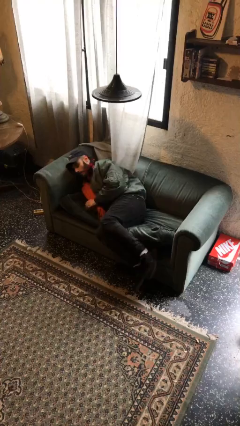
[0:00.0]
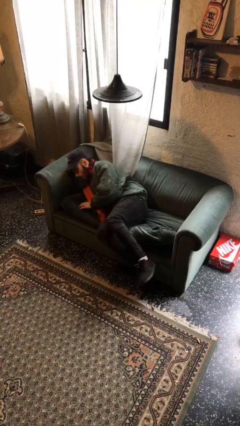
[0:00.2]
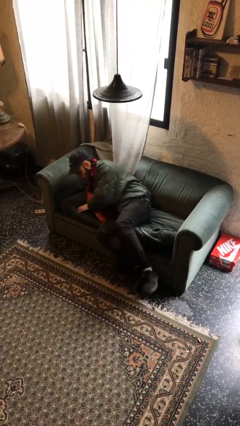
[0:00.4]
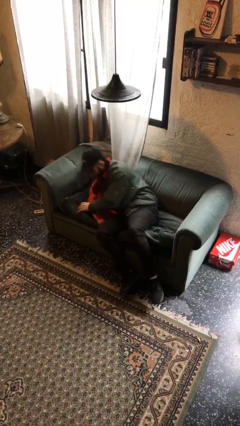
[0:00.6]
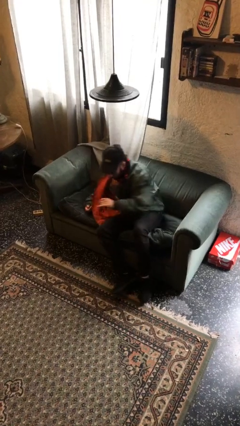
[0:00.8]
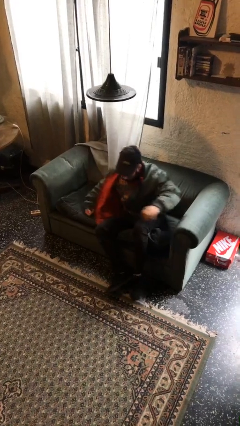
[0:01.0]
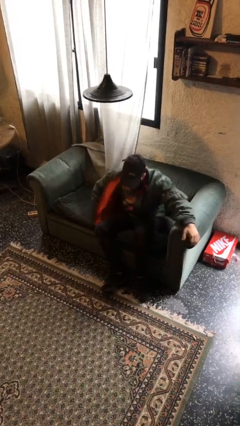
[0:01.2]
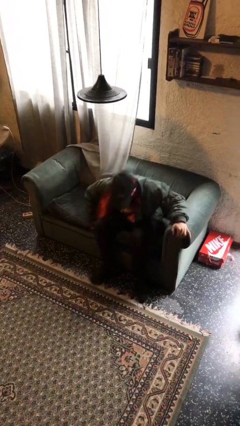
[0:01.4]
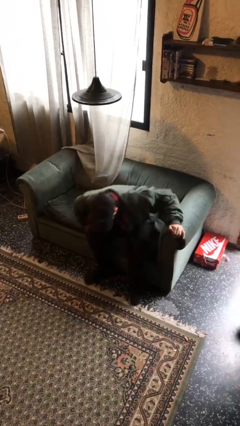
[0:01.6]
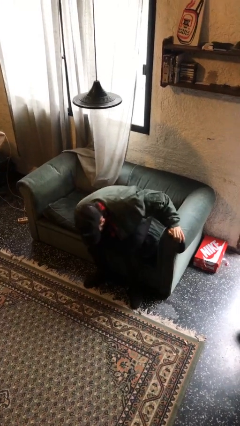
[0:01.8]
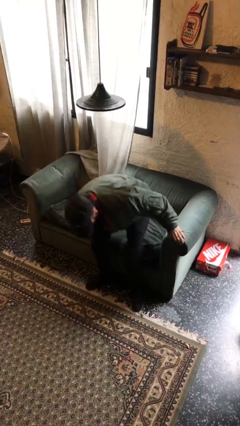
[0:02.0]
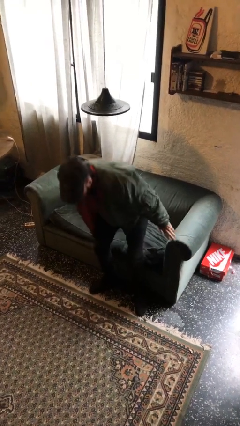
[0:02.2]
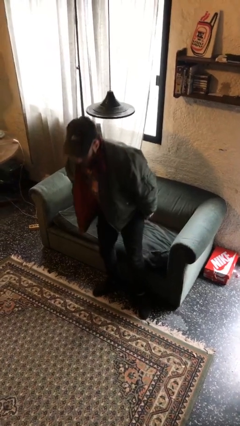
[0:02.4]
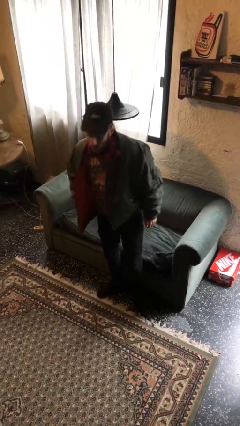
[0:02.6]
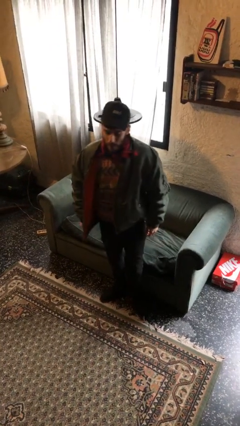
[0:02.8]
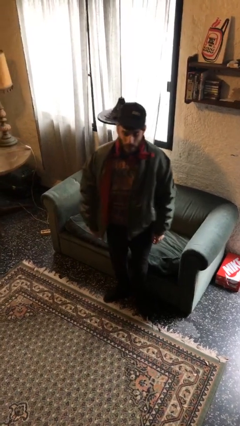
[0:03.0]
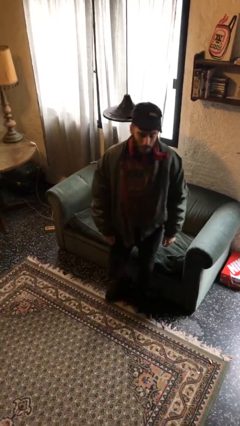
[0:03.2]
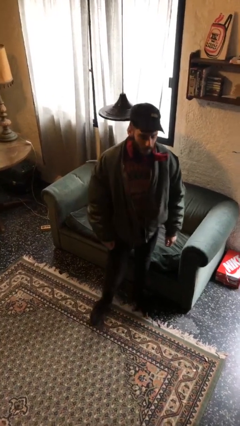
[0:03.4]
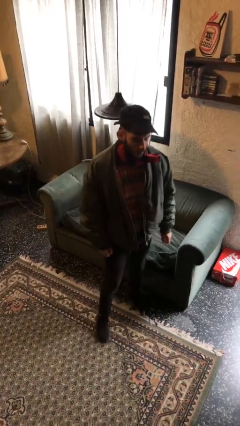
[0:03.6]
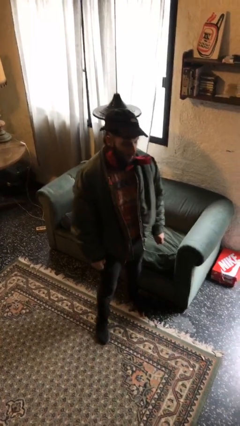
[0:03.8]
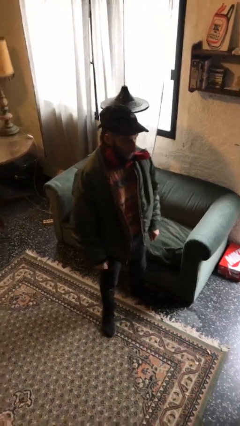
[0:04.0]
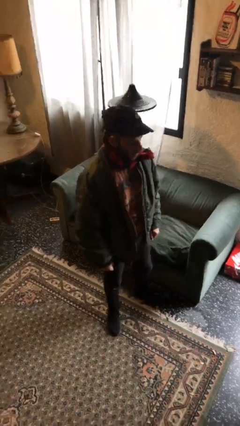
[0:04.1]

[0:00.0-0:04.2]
person stands up

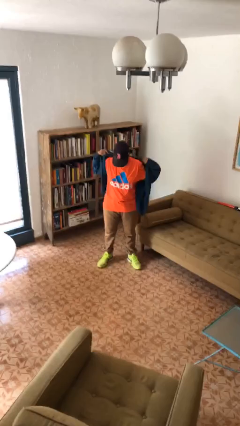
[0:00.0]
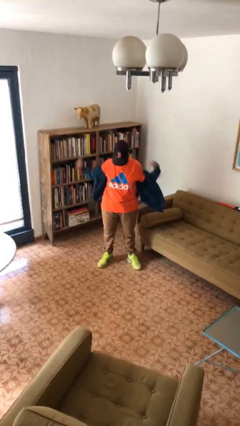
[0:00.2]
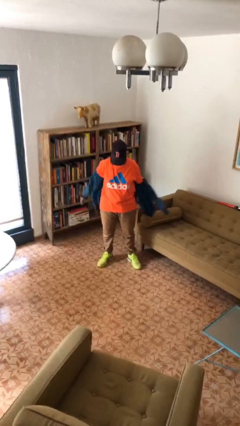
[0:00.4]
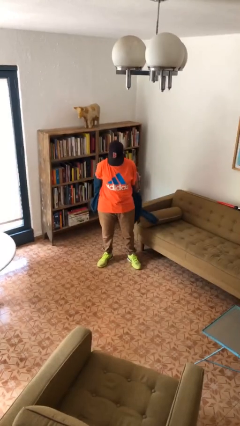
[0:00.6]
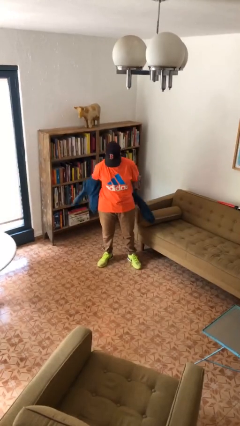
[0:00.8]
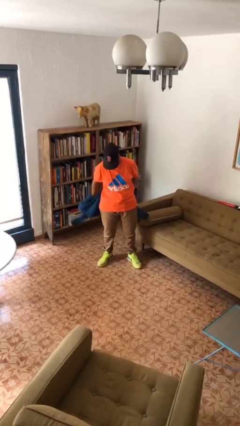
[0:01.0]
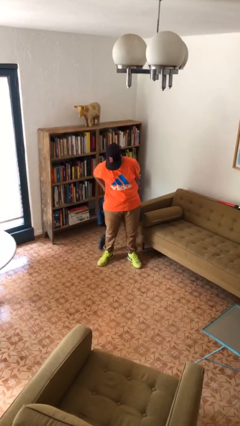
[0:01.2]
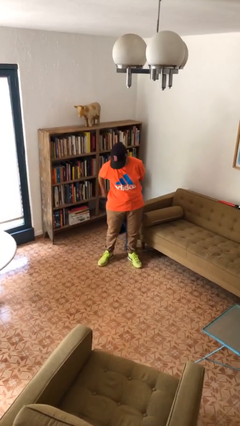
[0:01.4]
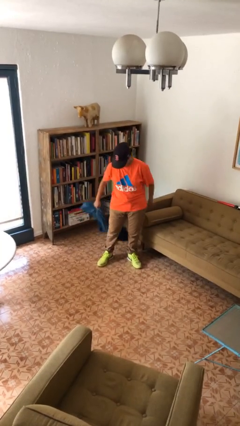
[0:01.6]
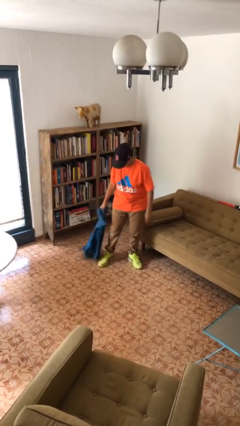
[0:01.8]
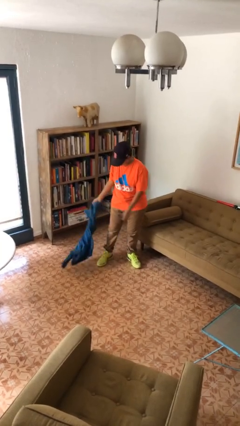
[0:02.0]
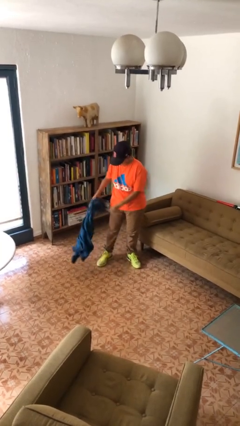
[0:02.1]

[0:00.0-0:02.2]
person takes off jacket

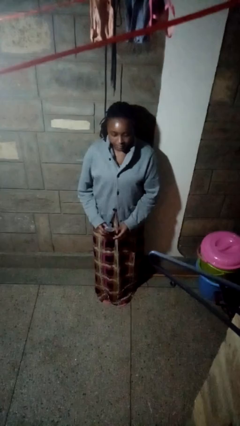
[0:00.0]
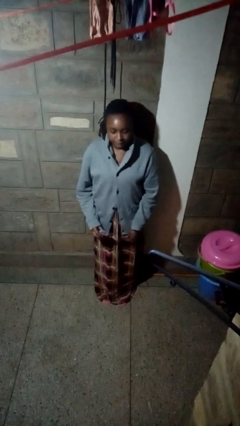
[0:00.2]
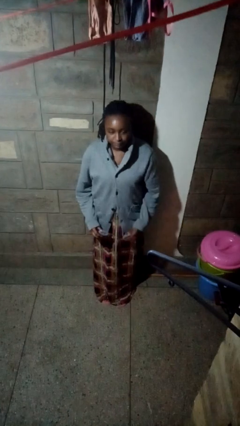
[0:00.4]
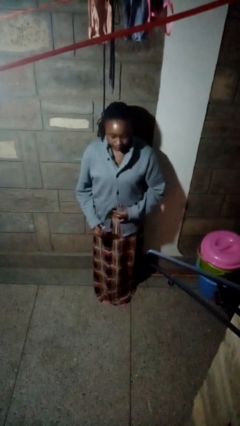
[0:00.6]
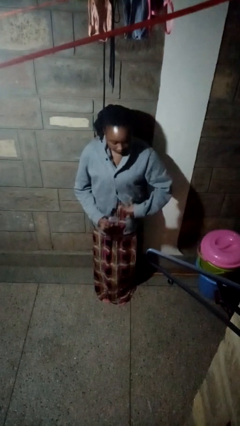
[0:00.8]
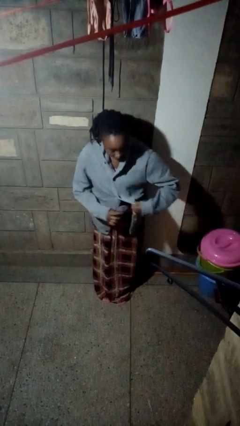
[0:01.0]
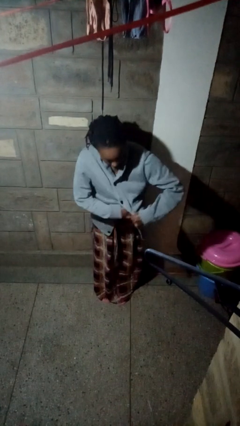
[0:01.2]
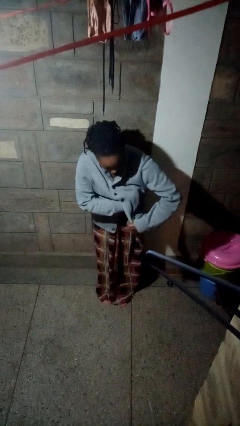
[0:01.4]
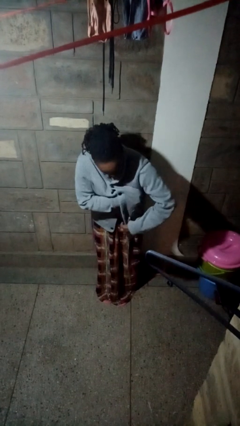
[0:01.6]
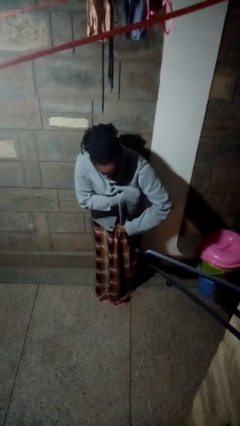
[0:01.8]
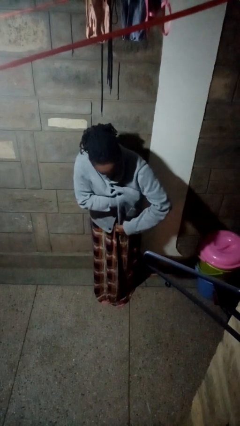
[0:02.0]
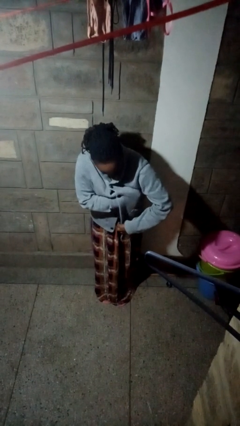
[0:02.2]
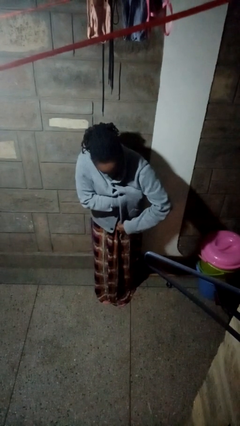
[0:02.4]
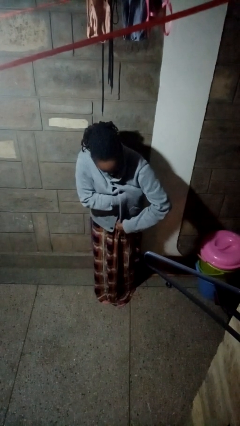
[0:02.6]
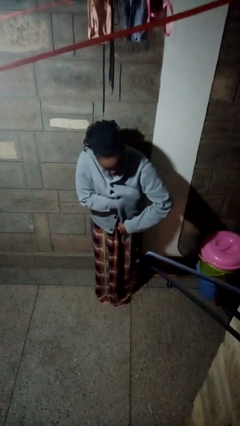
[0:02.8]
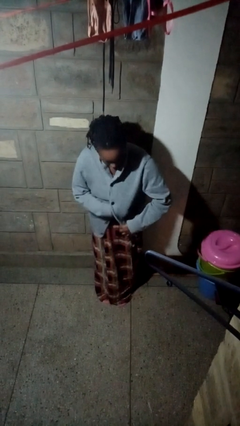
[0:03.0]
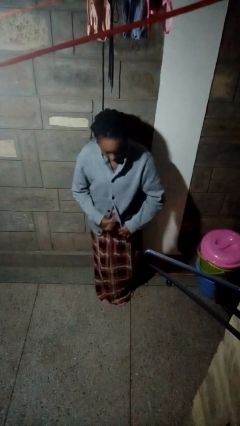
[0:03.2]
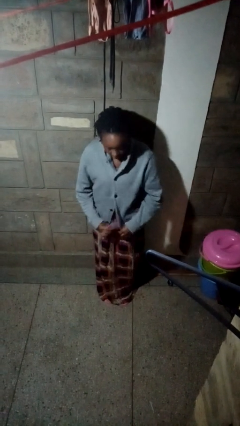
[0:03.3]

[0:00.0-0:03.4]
person applies deodorant

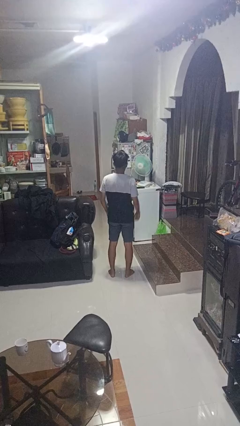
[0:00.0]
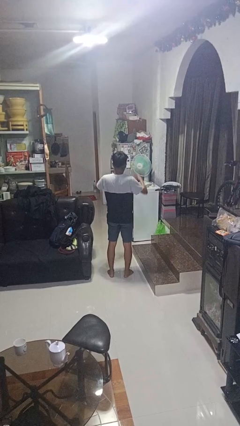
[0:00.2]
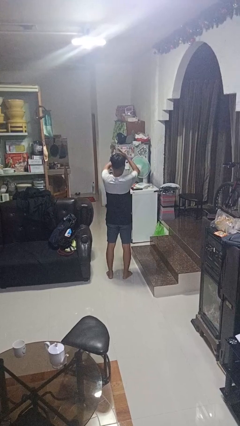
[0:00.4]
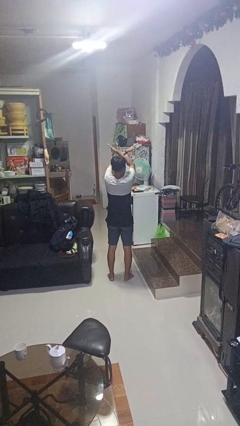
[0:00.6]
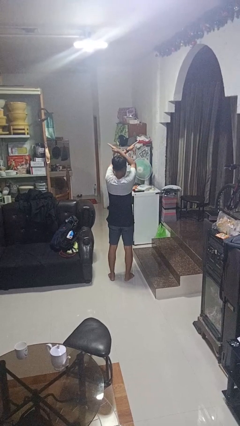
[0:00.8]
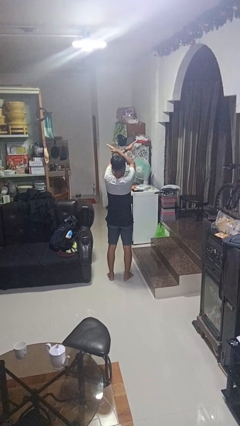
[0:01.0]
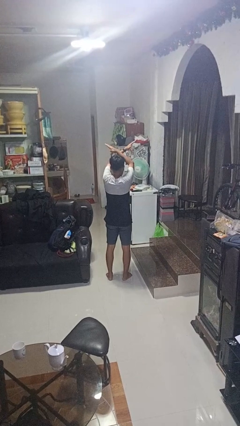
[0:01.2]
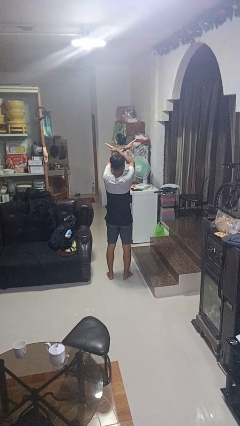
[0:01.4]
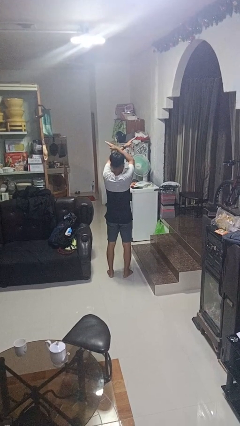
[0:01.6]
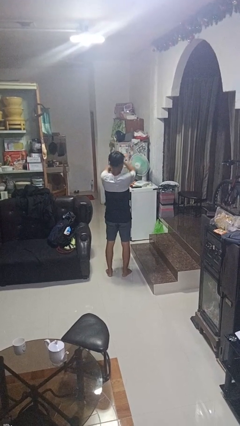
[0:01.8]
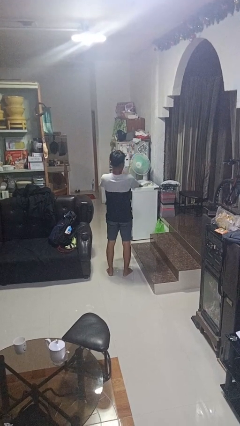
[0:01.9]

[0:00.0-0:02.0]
person gestures arms x

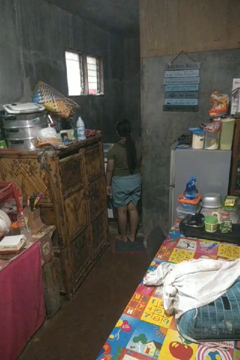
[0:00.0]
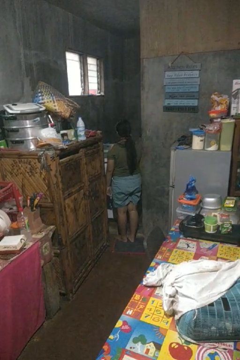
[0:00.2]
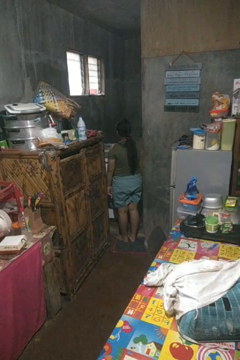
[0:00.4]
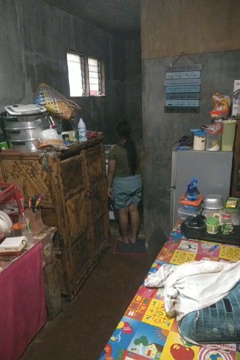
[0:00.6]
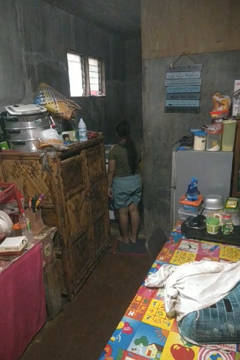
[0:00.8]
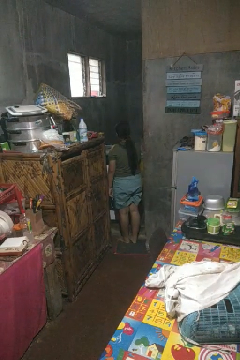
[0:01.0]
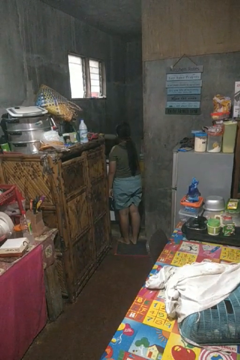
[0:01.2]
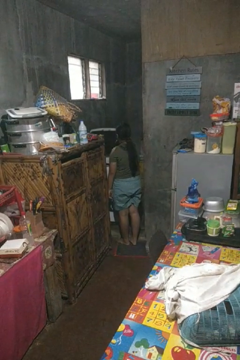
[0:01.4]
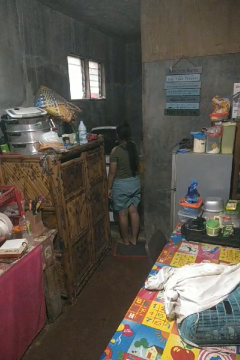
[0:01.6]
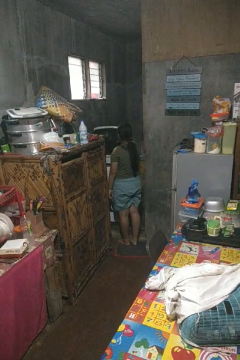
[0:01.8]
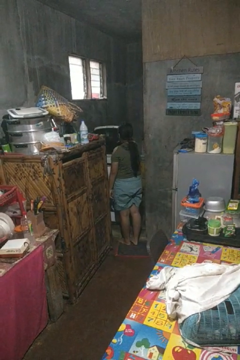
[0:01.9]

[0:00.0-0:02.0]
person opens clothes washer

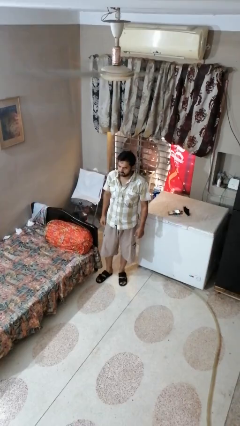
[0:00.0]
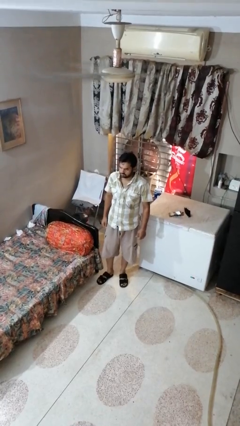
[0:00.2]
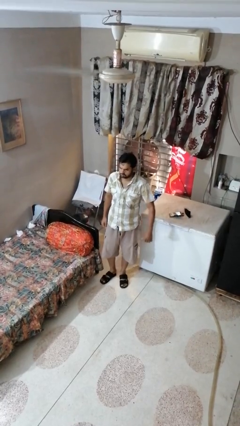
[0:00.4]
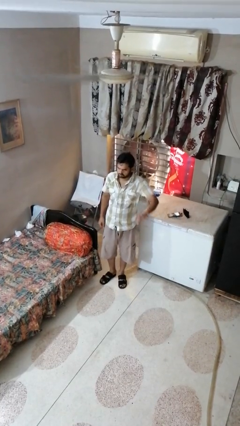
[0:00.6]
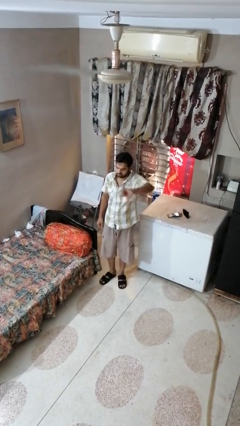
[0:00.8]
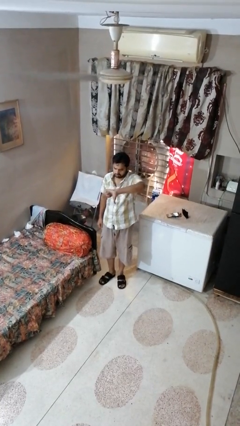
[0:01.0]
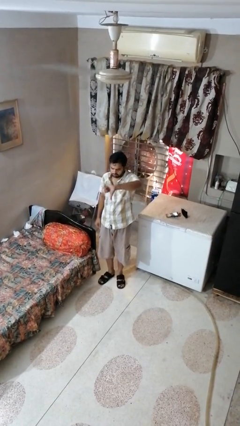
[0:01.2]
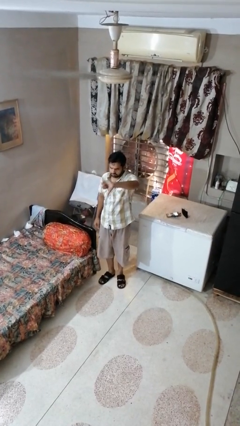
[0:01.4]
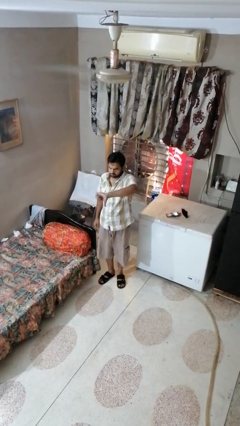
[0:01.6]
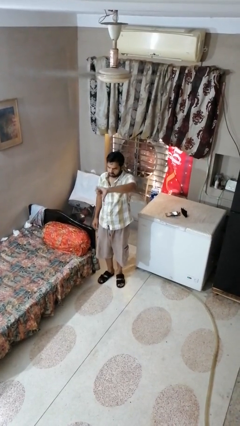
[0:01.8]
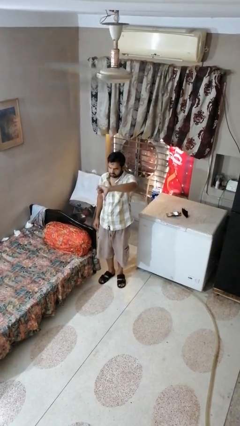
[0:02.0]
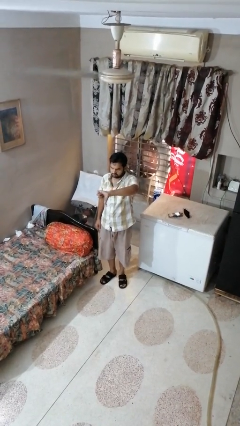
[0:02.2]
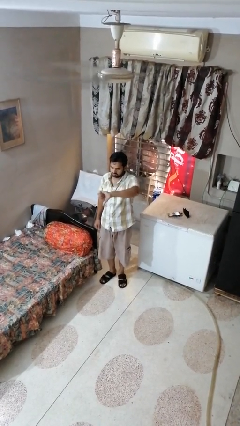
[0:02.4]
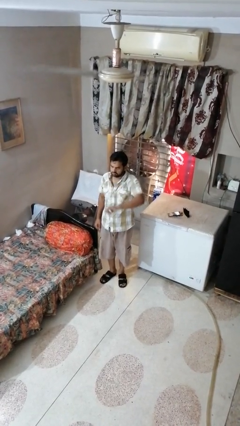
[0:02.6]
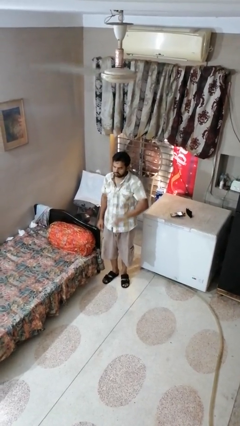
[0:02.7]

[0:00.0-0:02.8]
person gestures thumbs down

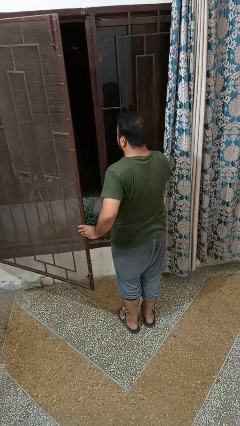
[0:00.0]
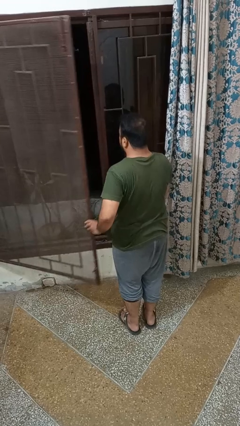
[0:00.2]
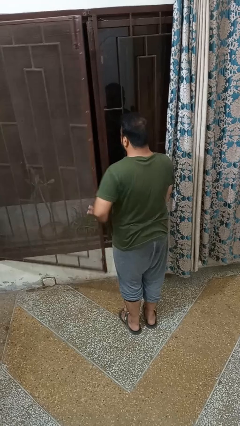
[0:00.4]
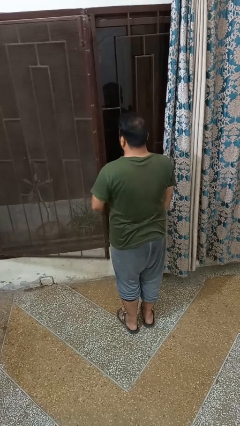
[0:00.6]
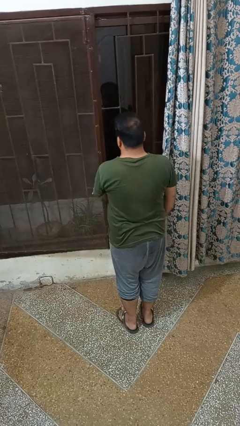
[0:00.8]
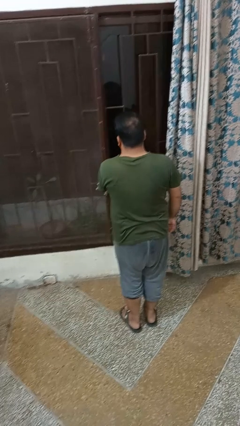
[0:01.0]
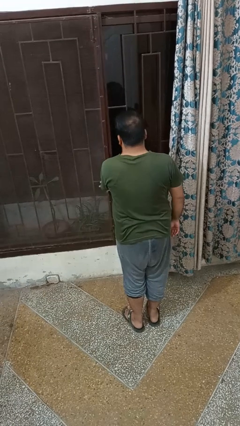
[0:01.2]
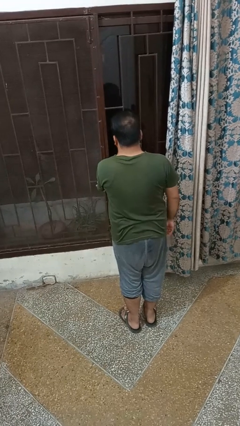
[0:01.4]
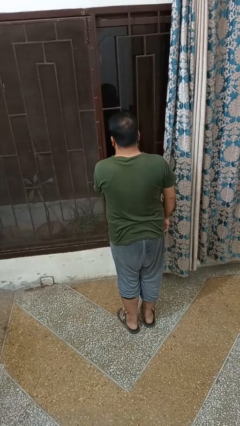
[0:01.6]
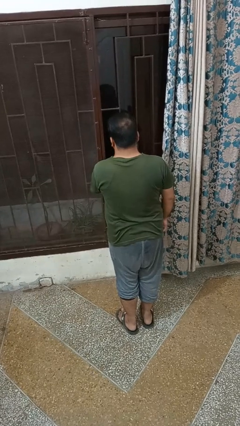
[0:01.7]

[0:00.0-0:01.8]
person closes home window
